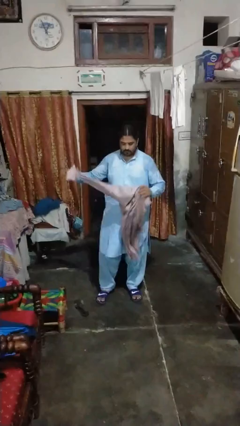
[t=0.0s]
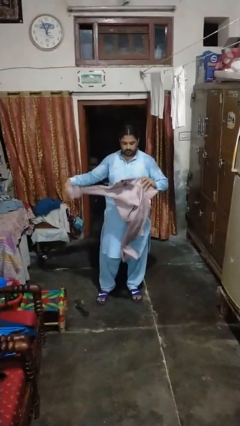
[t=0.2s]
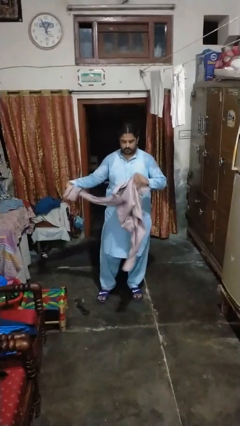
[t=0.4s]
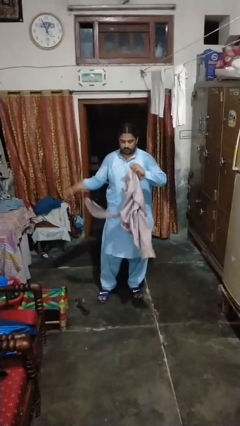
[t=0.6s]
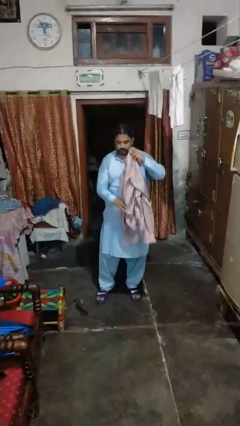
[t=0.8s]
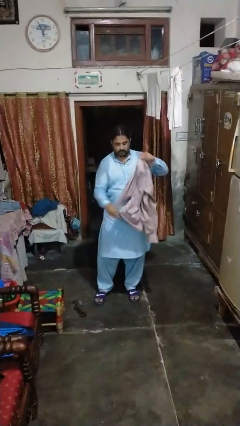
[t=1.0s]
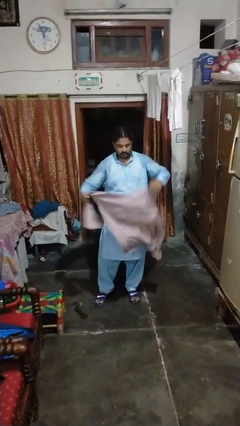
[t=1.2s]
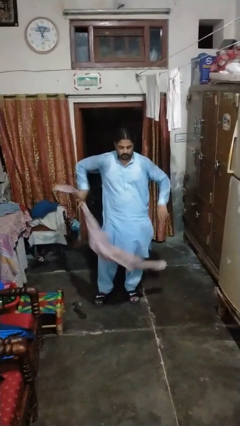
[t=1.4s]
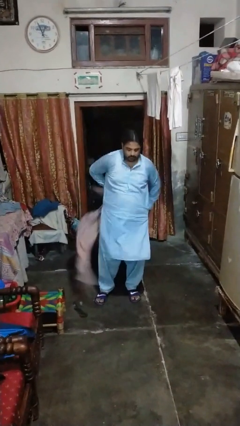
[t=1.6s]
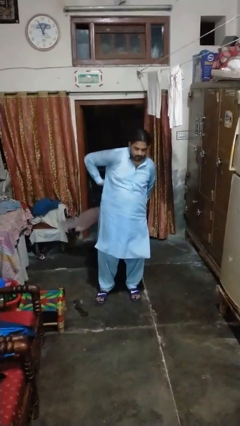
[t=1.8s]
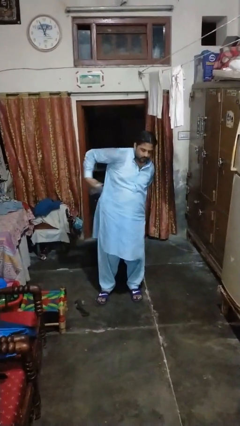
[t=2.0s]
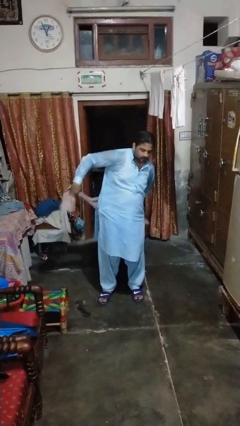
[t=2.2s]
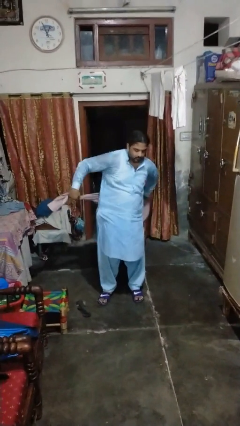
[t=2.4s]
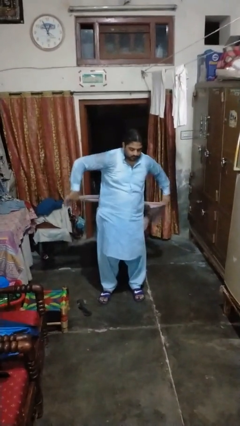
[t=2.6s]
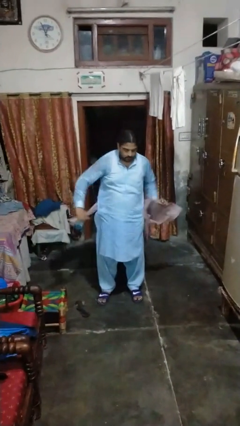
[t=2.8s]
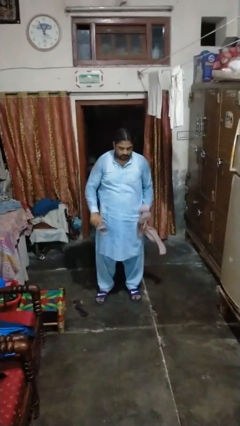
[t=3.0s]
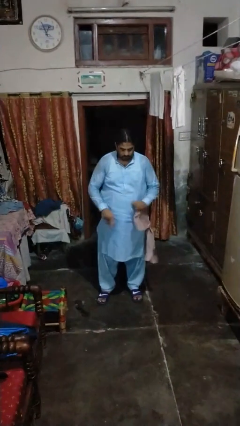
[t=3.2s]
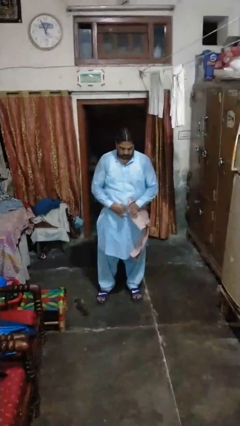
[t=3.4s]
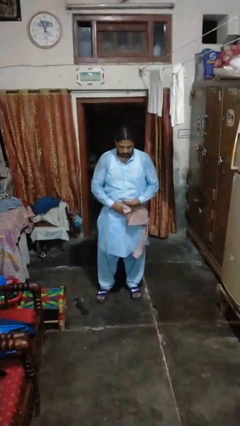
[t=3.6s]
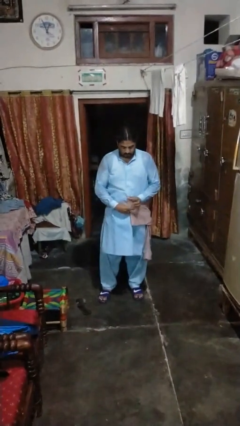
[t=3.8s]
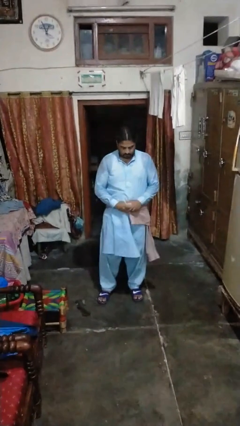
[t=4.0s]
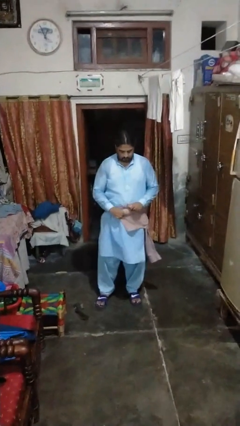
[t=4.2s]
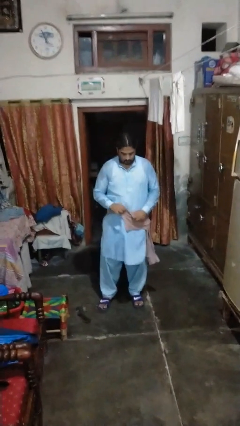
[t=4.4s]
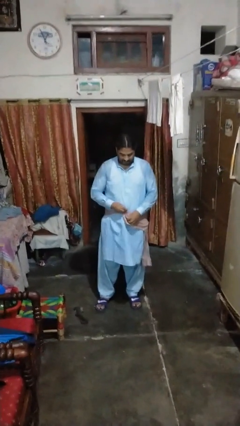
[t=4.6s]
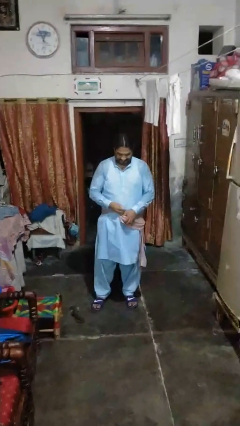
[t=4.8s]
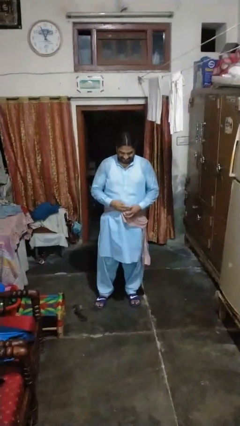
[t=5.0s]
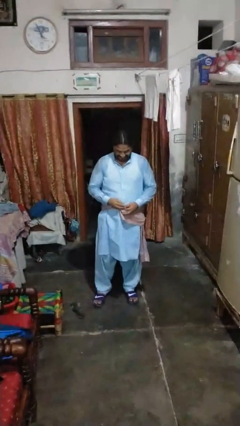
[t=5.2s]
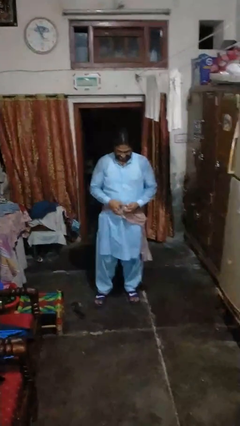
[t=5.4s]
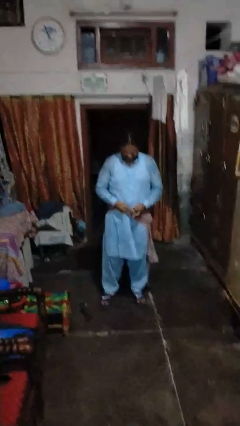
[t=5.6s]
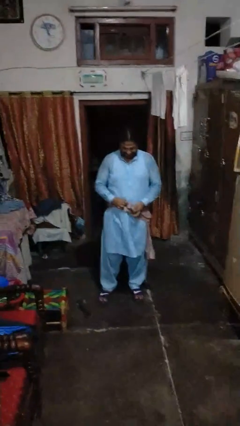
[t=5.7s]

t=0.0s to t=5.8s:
person ties jacket around waist

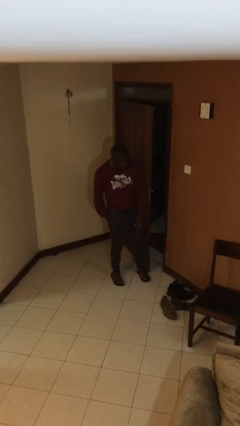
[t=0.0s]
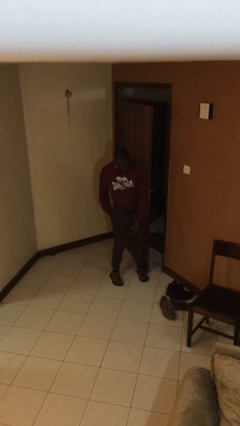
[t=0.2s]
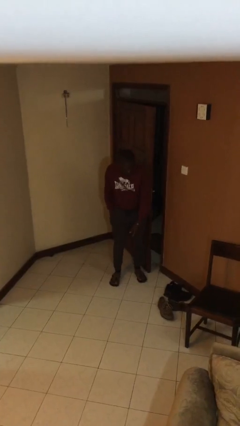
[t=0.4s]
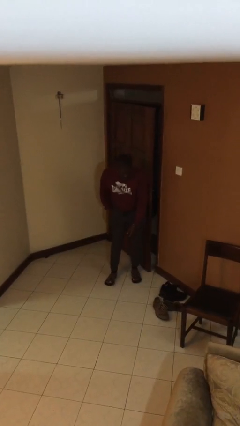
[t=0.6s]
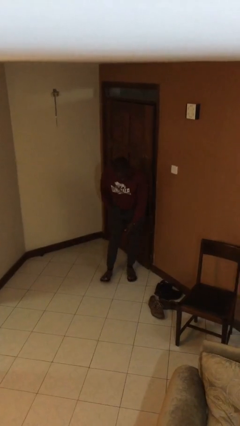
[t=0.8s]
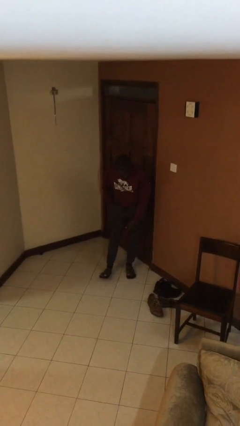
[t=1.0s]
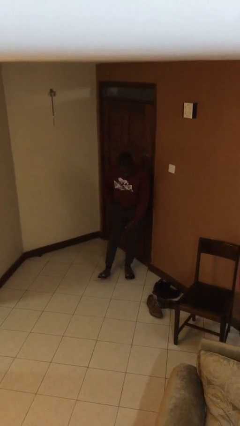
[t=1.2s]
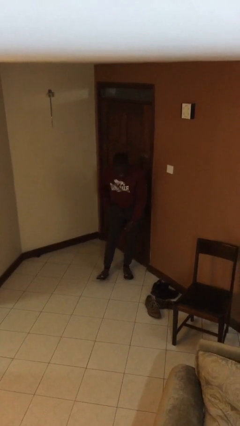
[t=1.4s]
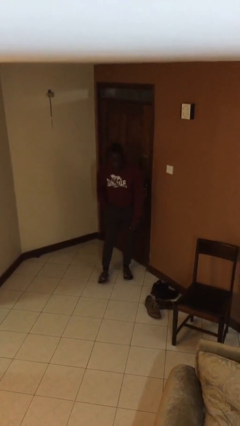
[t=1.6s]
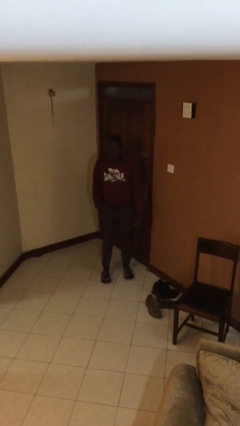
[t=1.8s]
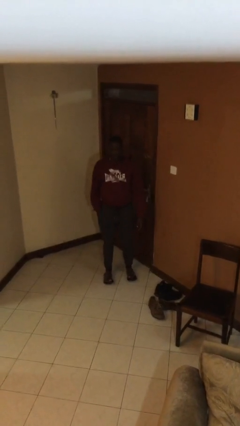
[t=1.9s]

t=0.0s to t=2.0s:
person closes door with hip

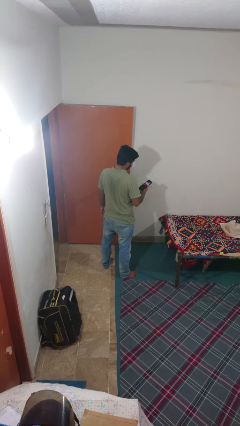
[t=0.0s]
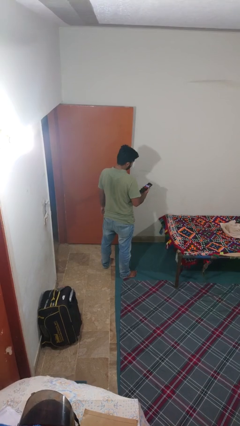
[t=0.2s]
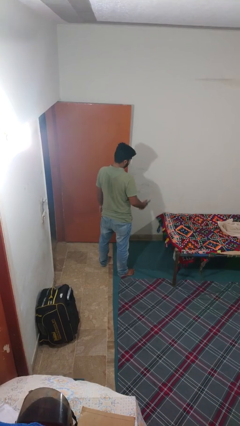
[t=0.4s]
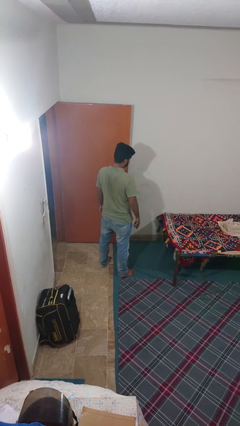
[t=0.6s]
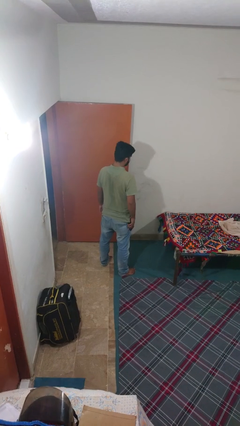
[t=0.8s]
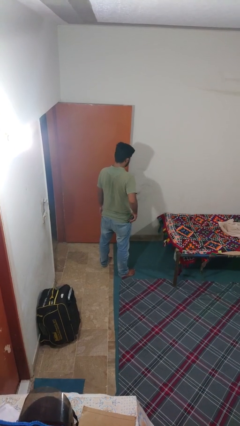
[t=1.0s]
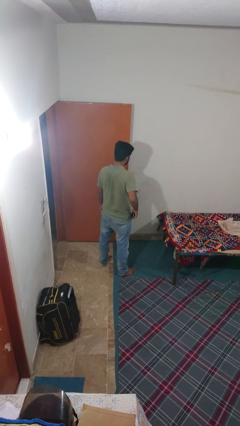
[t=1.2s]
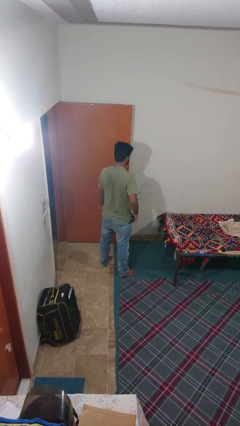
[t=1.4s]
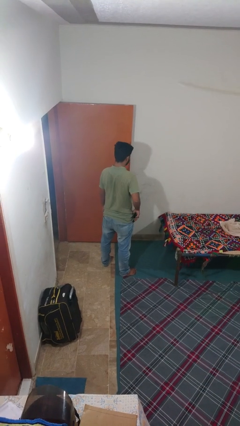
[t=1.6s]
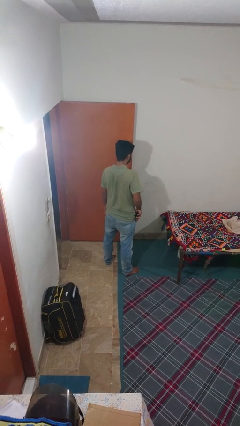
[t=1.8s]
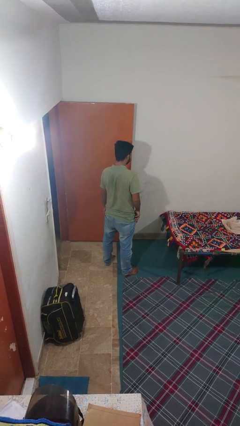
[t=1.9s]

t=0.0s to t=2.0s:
person puts phone into pocket

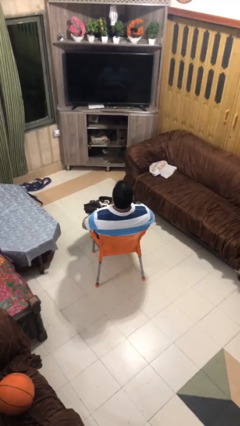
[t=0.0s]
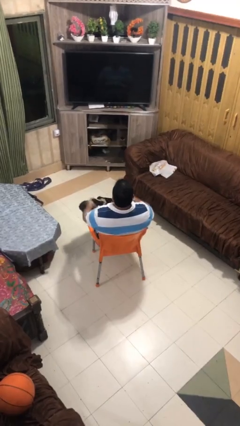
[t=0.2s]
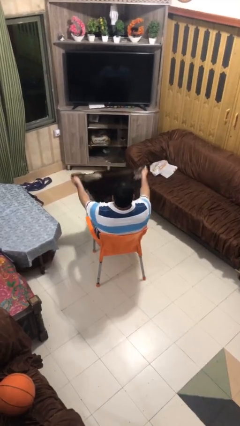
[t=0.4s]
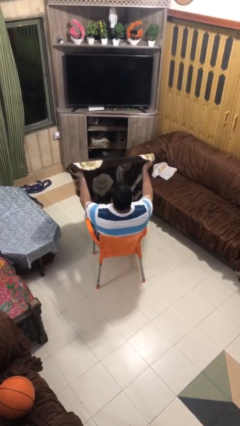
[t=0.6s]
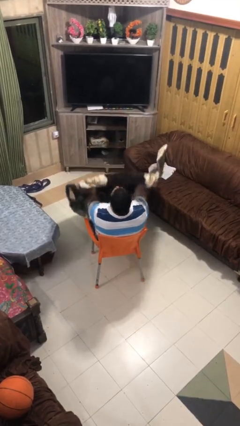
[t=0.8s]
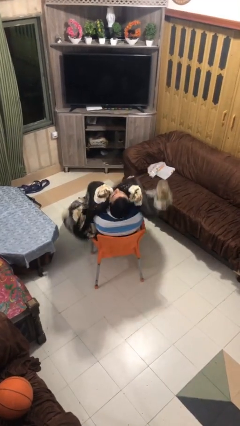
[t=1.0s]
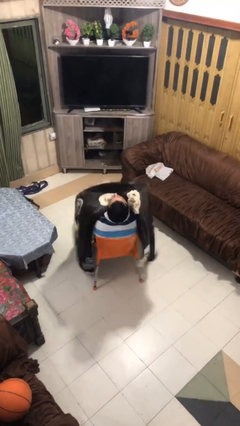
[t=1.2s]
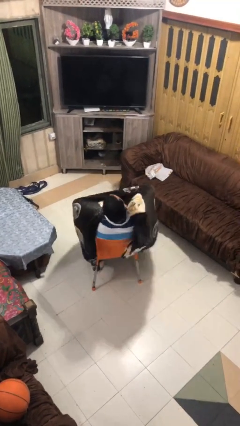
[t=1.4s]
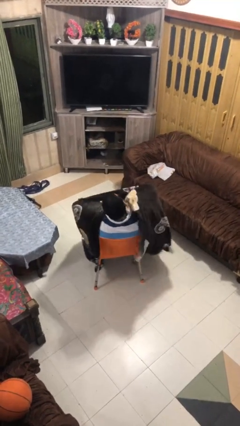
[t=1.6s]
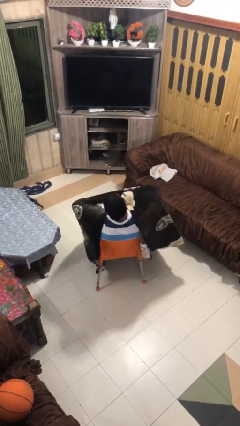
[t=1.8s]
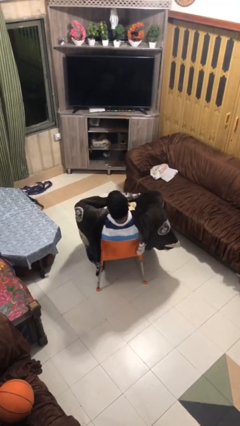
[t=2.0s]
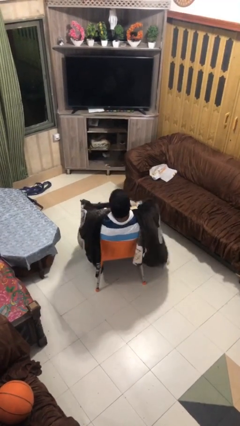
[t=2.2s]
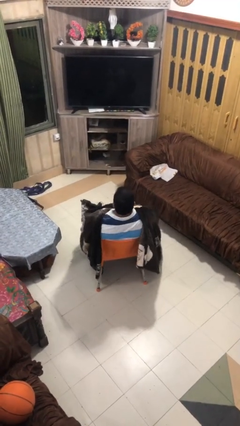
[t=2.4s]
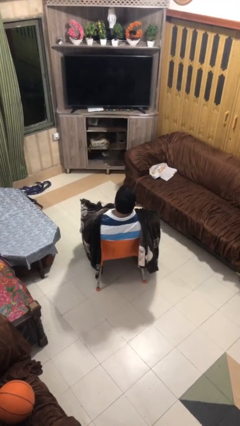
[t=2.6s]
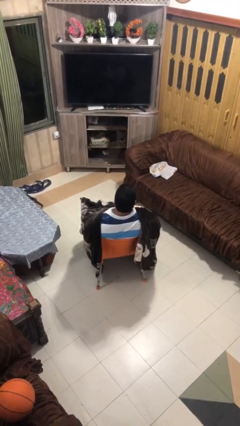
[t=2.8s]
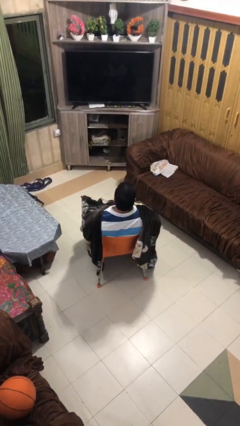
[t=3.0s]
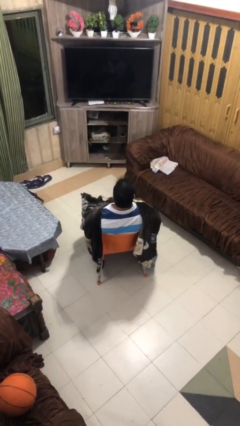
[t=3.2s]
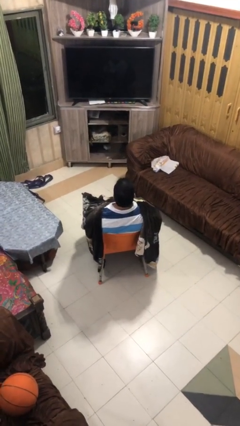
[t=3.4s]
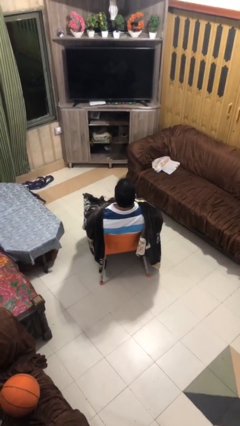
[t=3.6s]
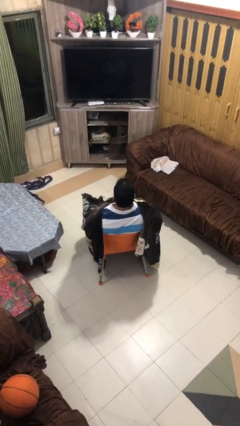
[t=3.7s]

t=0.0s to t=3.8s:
person covers with blanket

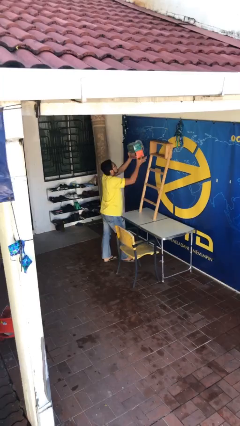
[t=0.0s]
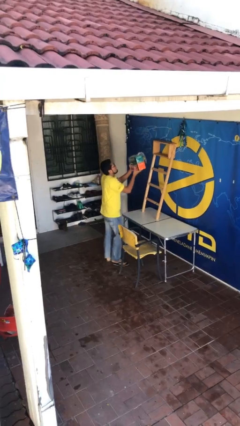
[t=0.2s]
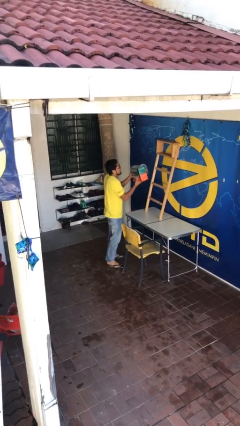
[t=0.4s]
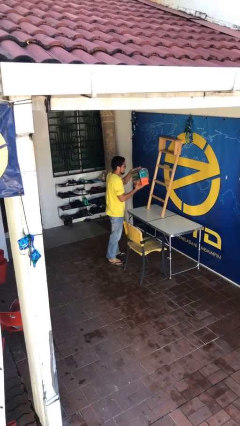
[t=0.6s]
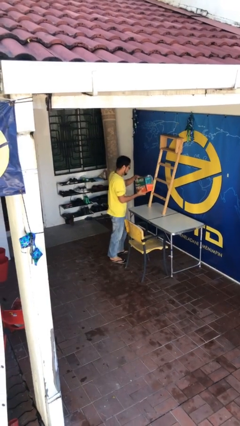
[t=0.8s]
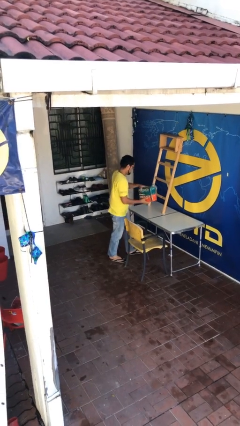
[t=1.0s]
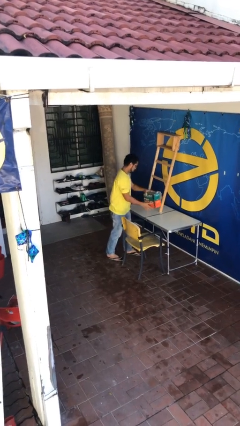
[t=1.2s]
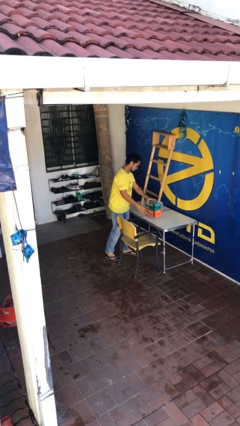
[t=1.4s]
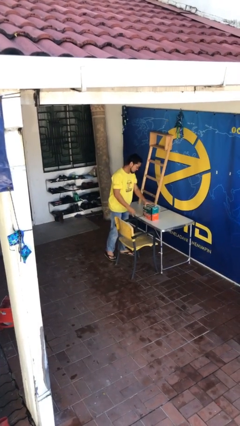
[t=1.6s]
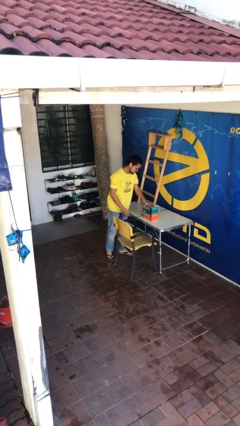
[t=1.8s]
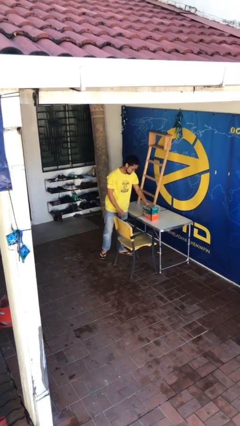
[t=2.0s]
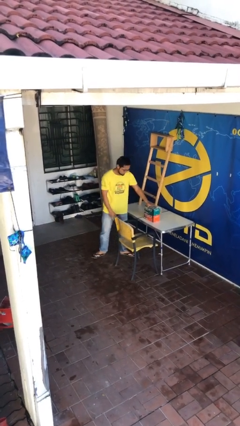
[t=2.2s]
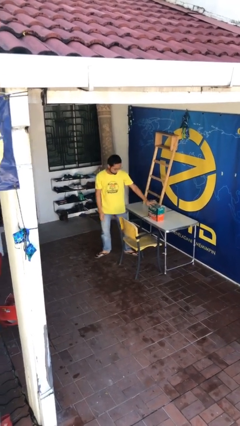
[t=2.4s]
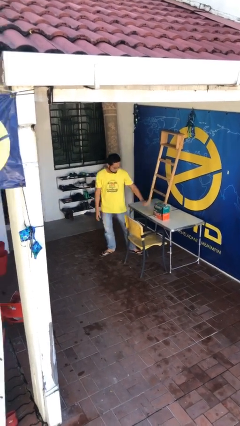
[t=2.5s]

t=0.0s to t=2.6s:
person puts down object on table

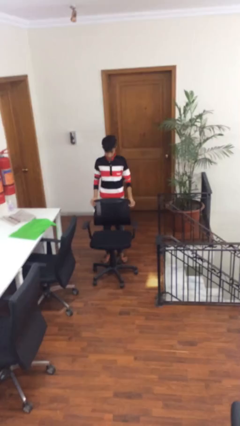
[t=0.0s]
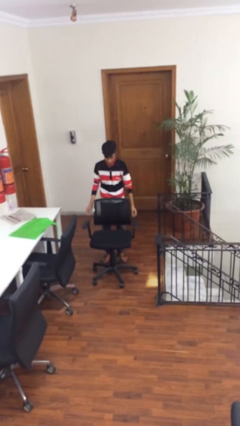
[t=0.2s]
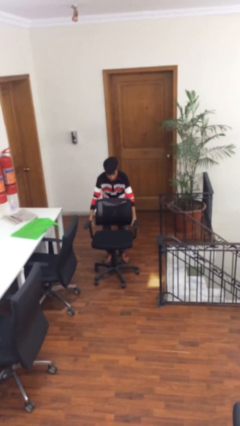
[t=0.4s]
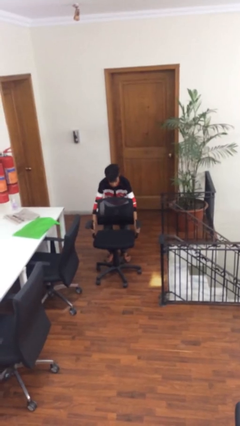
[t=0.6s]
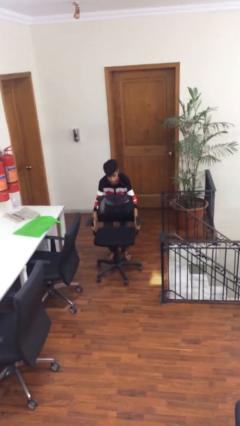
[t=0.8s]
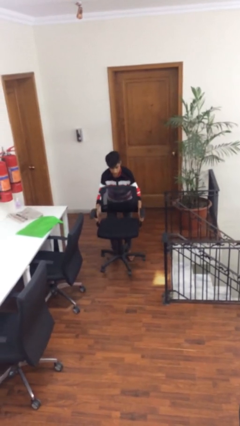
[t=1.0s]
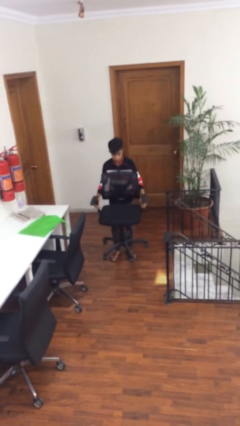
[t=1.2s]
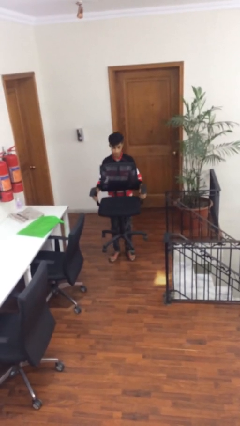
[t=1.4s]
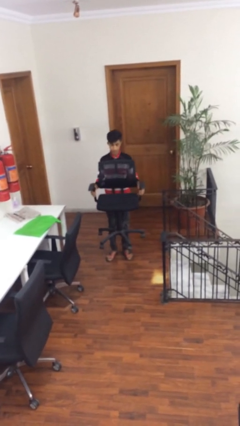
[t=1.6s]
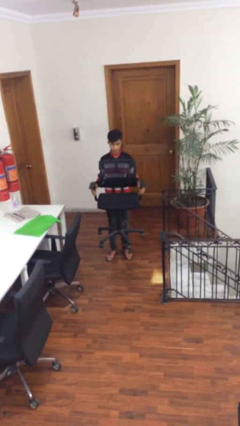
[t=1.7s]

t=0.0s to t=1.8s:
person picks up object from floor
